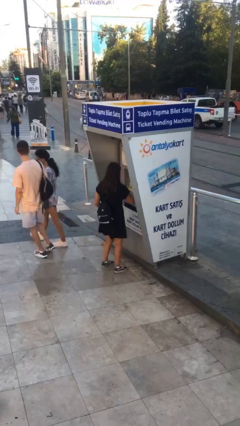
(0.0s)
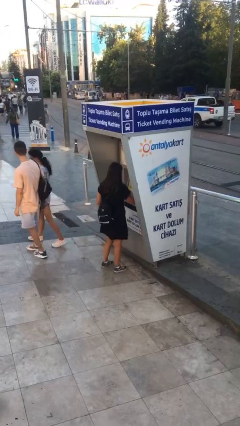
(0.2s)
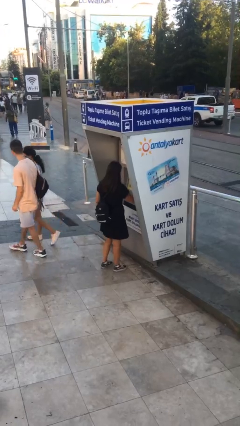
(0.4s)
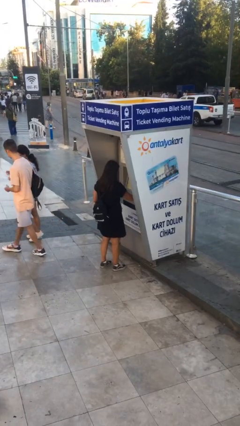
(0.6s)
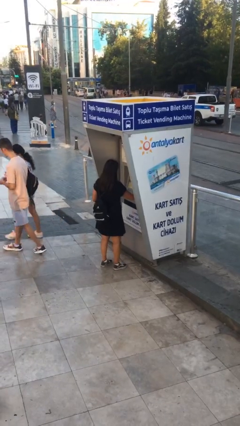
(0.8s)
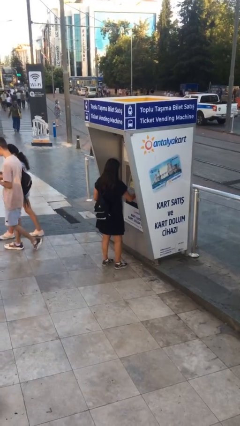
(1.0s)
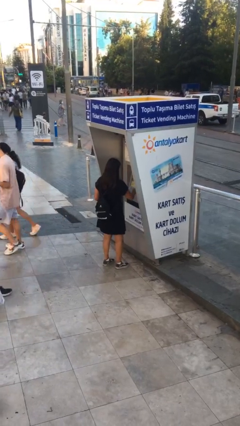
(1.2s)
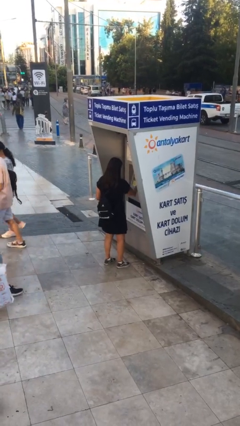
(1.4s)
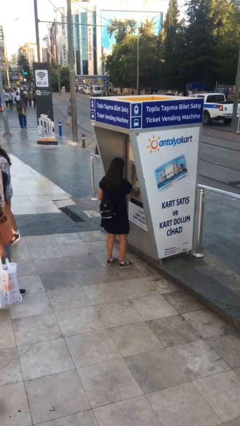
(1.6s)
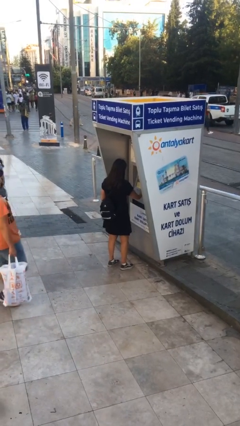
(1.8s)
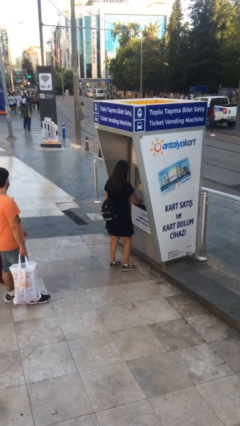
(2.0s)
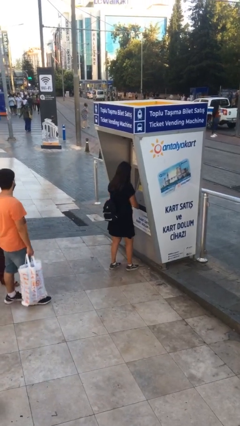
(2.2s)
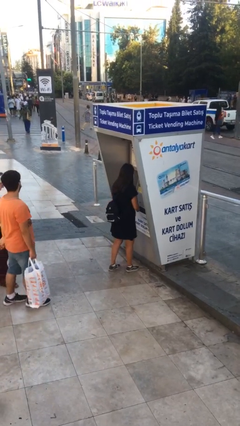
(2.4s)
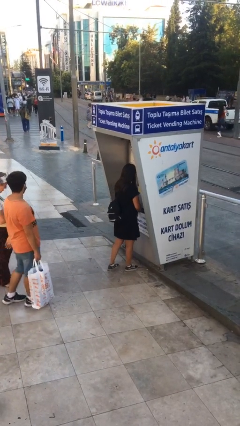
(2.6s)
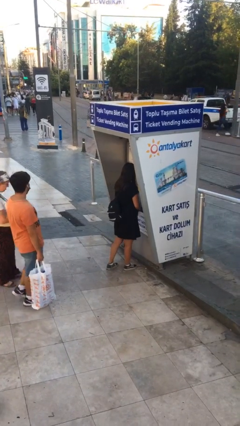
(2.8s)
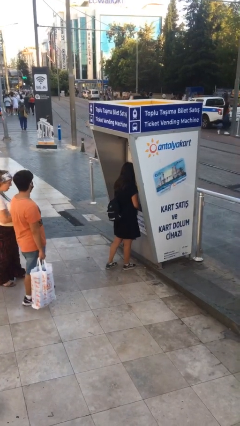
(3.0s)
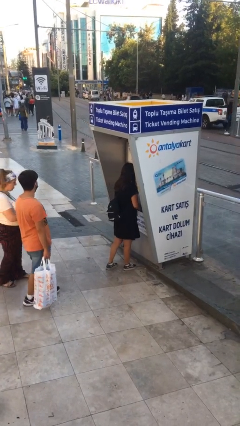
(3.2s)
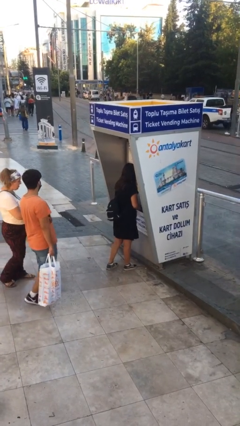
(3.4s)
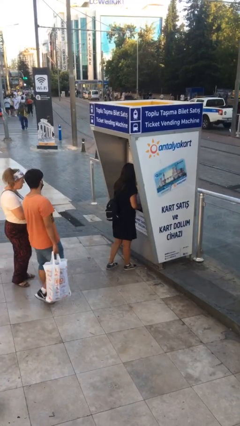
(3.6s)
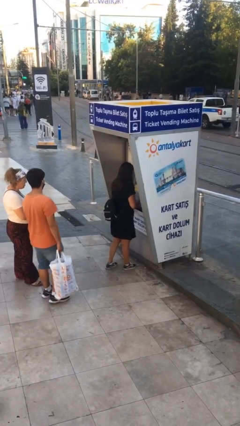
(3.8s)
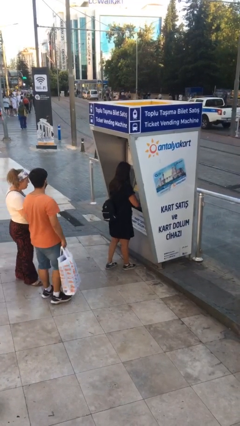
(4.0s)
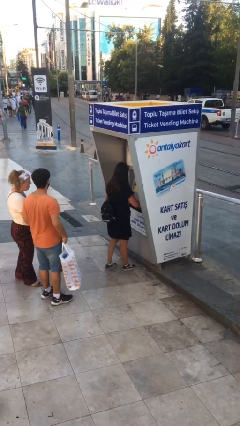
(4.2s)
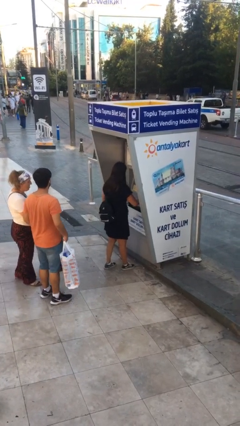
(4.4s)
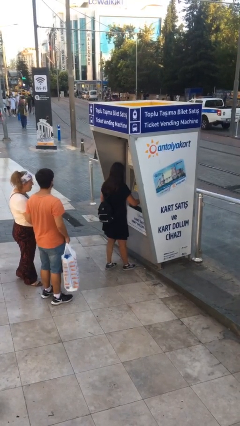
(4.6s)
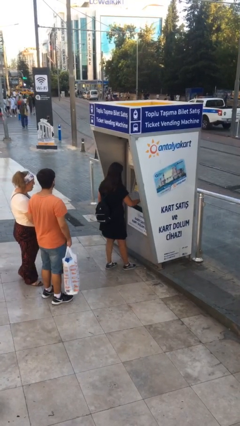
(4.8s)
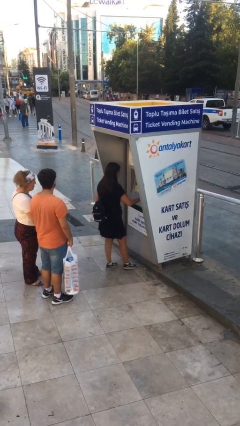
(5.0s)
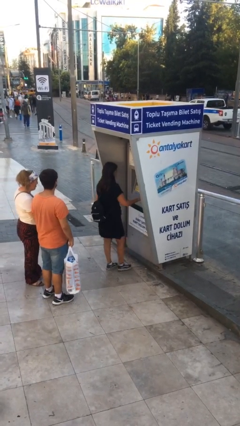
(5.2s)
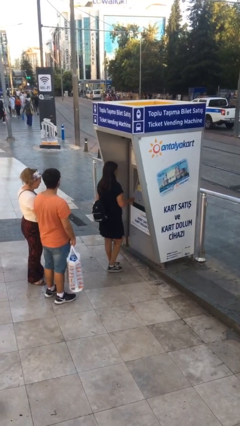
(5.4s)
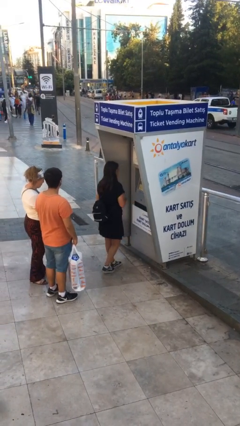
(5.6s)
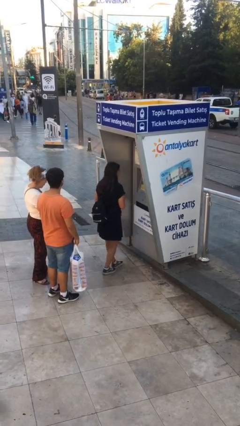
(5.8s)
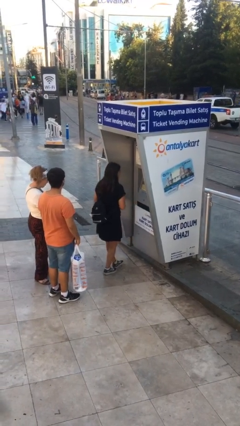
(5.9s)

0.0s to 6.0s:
person purchases from machine

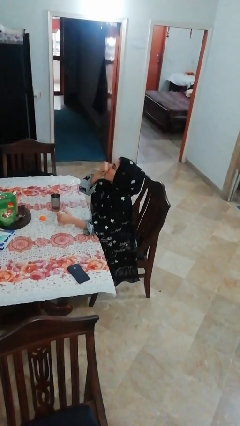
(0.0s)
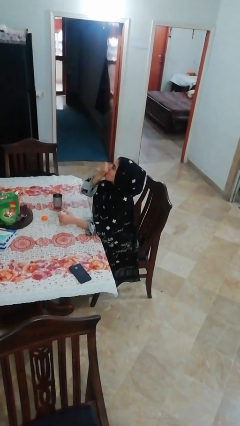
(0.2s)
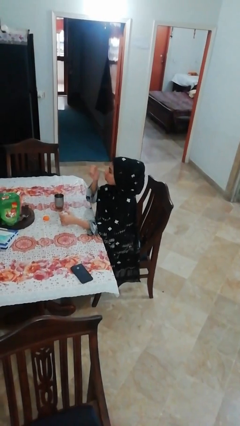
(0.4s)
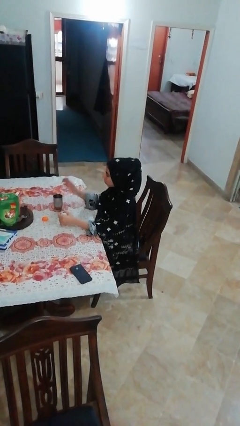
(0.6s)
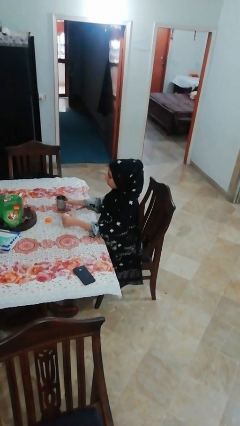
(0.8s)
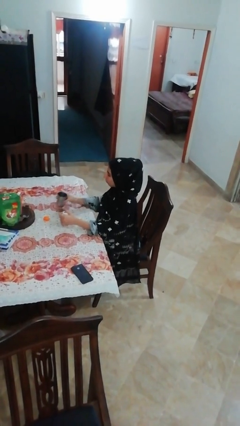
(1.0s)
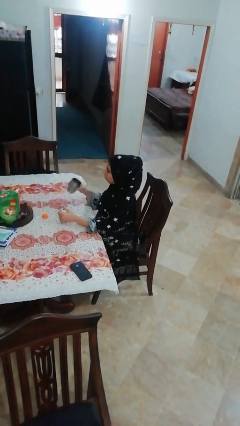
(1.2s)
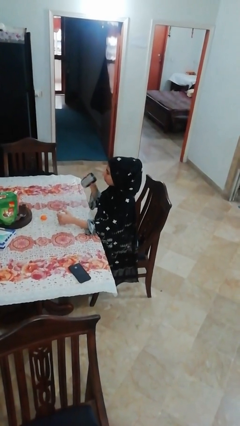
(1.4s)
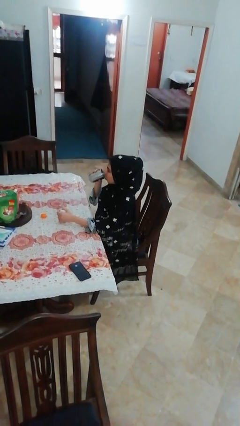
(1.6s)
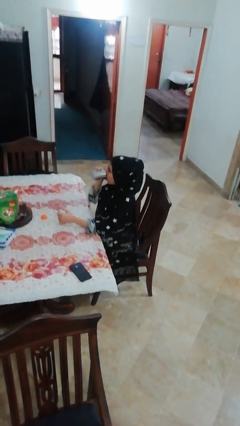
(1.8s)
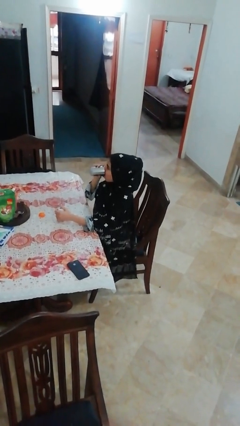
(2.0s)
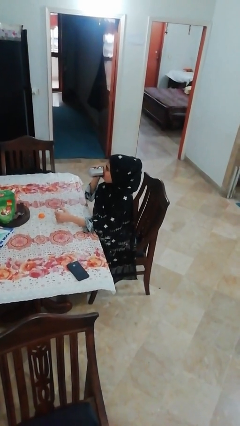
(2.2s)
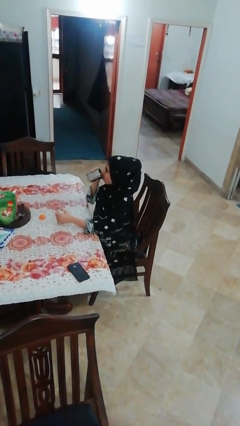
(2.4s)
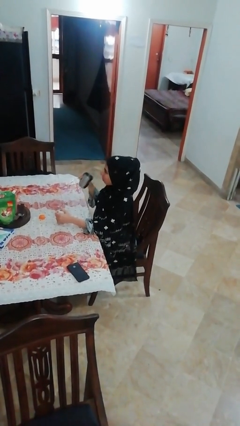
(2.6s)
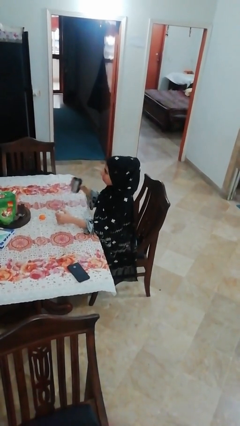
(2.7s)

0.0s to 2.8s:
person drinks from cup

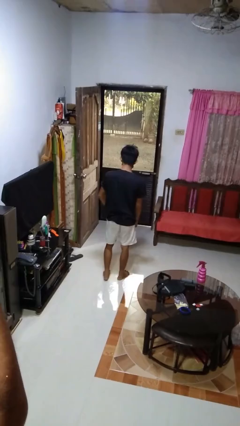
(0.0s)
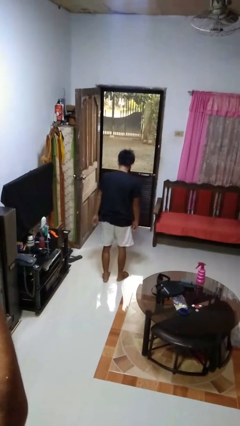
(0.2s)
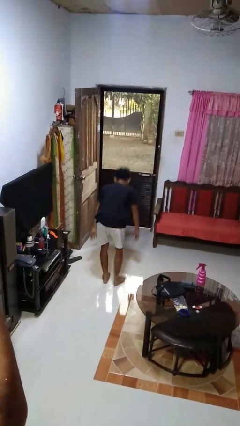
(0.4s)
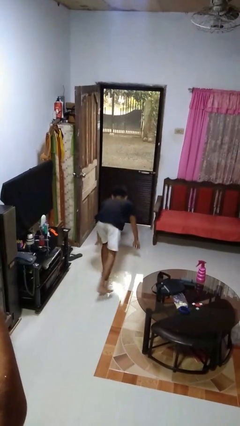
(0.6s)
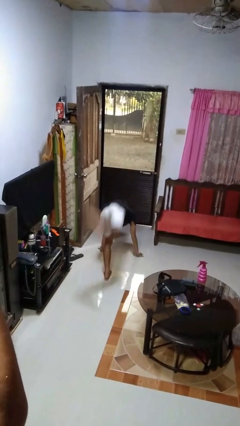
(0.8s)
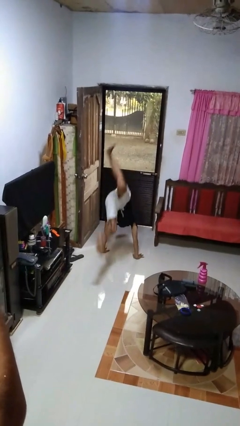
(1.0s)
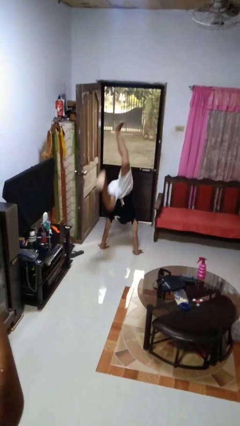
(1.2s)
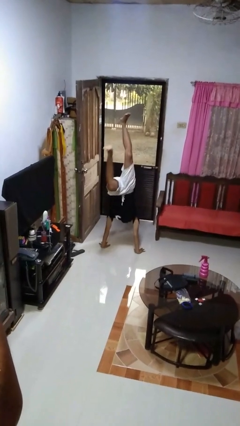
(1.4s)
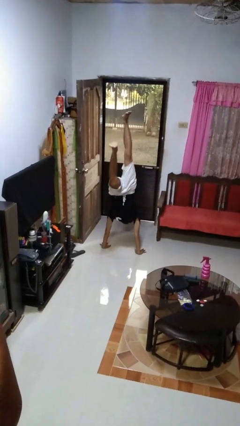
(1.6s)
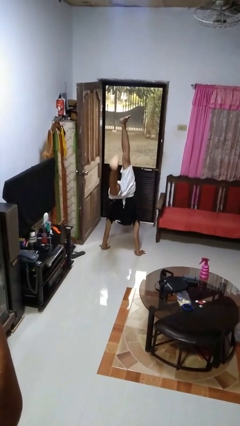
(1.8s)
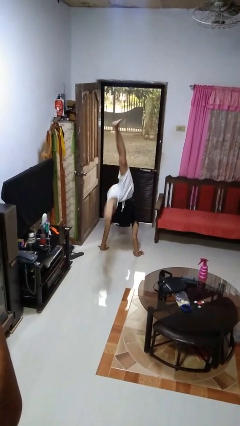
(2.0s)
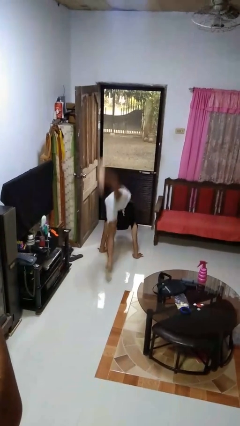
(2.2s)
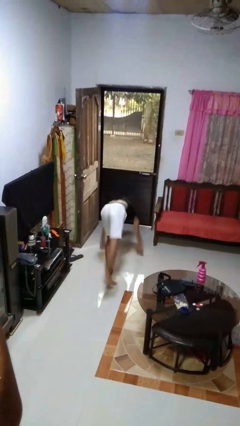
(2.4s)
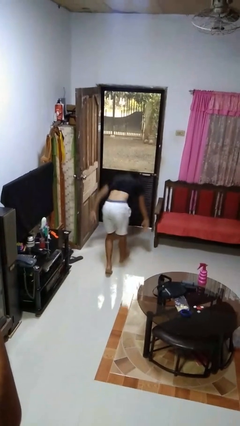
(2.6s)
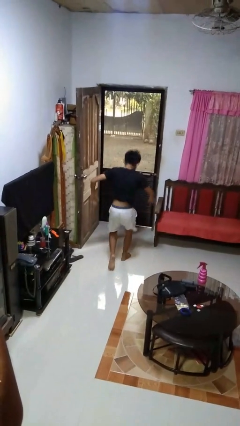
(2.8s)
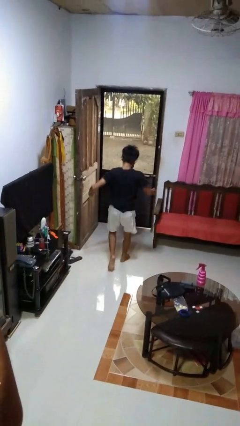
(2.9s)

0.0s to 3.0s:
person handstand

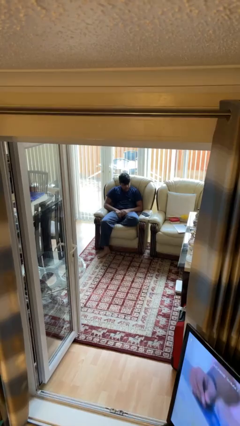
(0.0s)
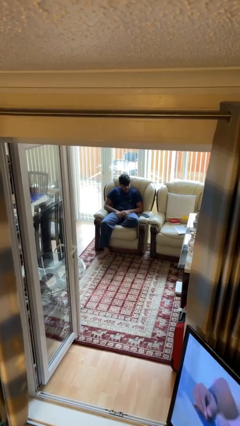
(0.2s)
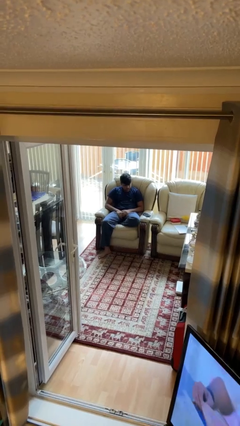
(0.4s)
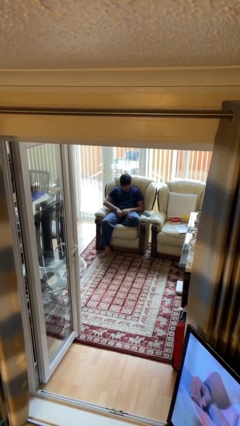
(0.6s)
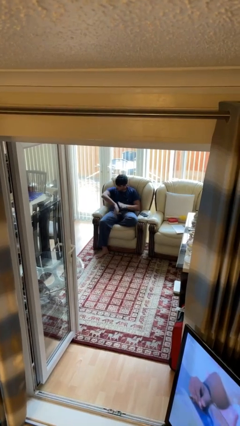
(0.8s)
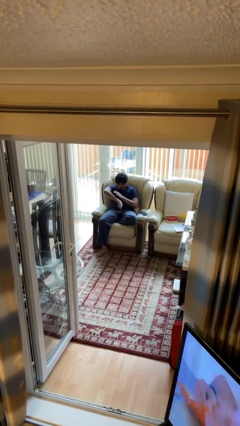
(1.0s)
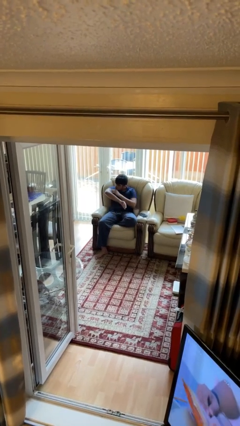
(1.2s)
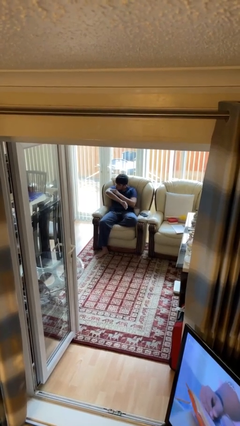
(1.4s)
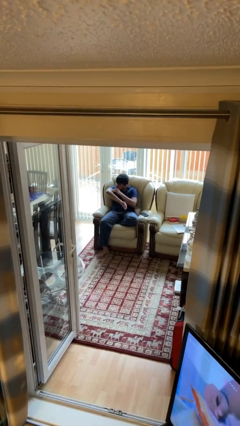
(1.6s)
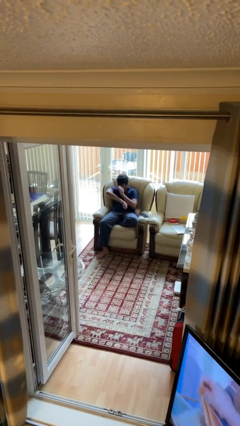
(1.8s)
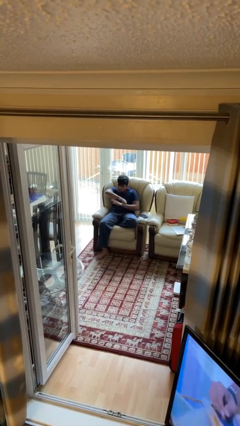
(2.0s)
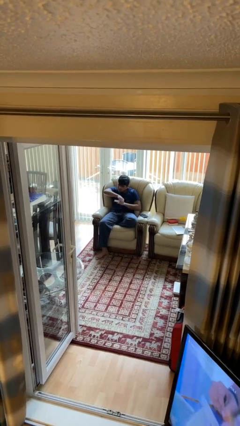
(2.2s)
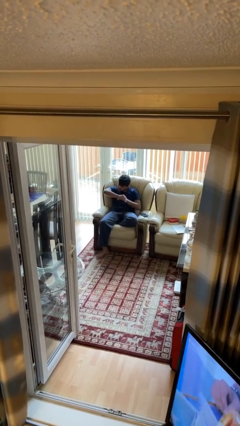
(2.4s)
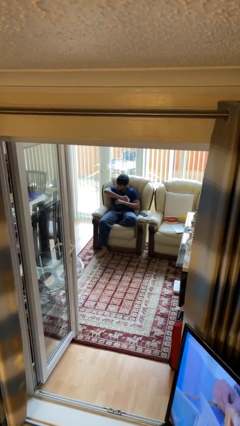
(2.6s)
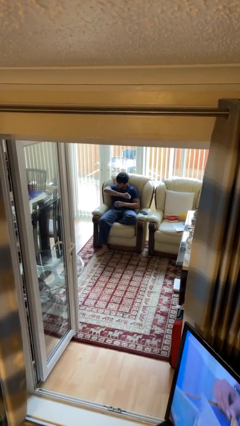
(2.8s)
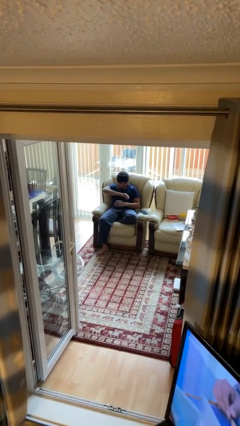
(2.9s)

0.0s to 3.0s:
person swats bug

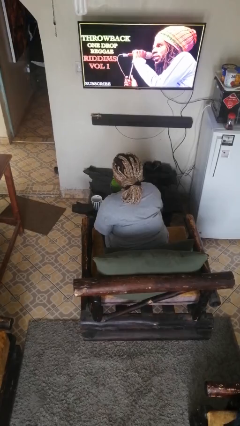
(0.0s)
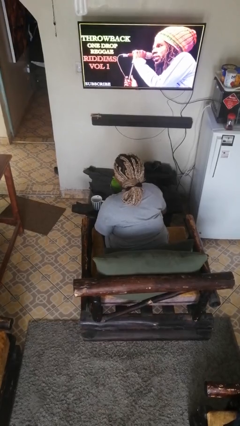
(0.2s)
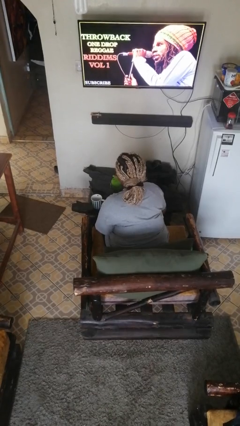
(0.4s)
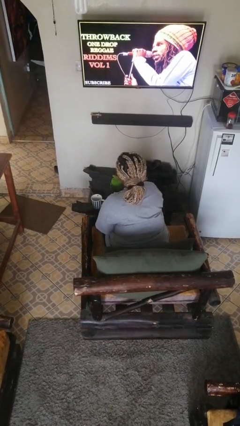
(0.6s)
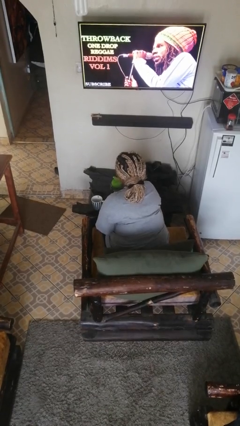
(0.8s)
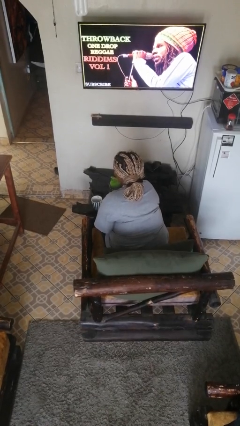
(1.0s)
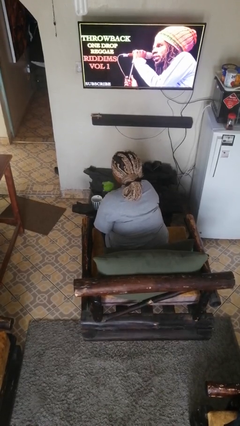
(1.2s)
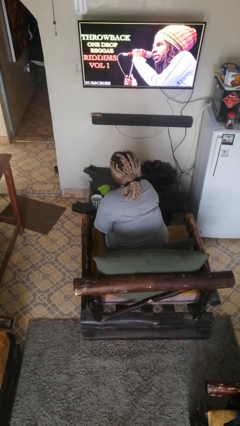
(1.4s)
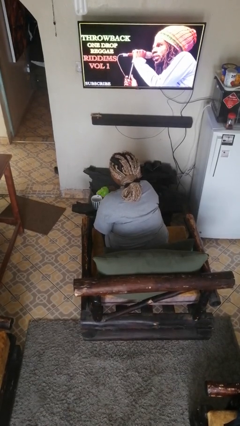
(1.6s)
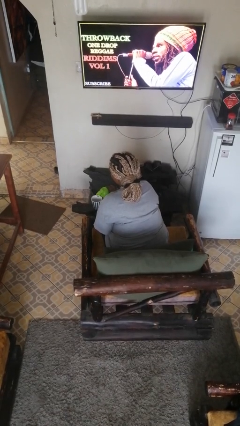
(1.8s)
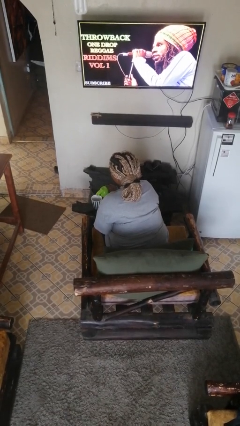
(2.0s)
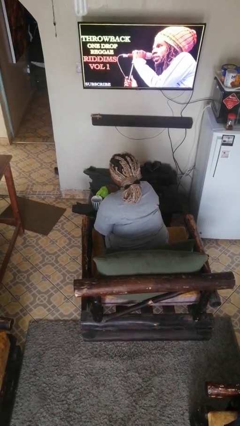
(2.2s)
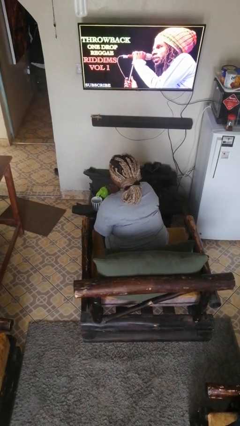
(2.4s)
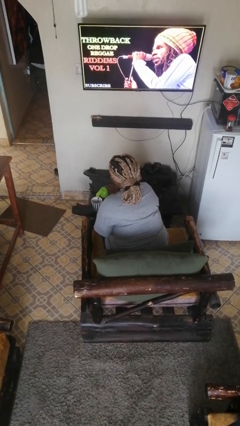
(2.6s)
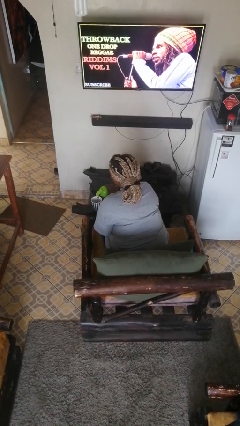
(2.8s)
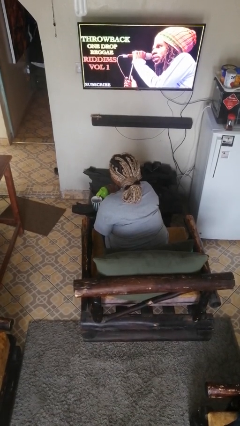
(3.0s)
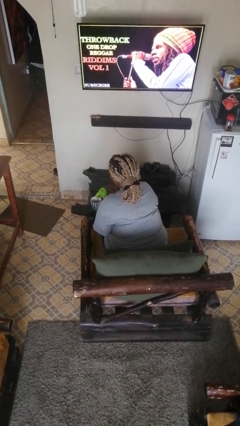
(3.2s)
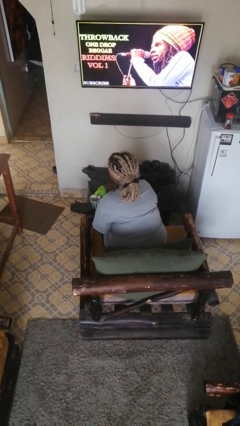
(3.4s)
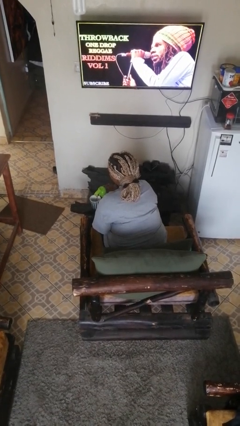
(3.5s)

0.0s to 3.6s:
person pours coffee into mug
